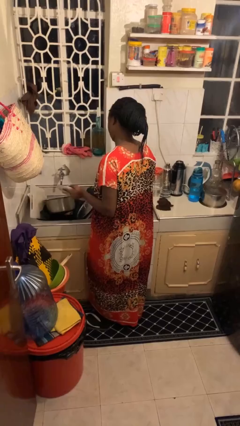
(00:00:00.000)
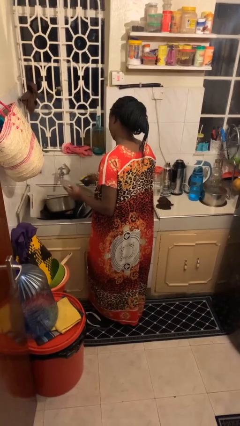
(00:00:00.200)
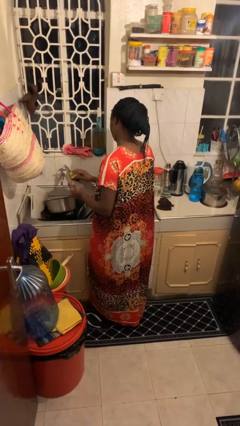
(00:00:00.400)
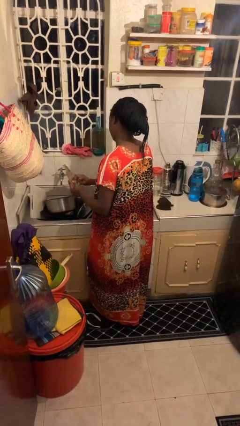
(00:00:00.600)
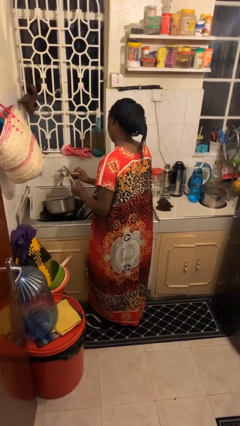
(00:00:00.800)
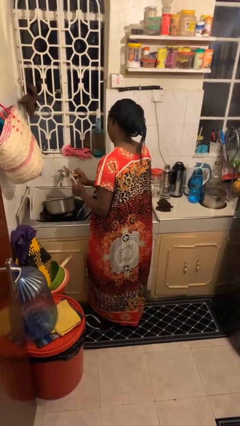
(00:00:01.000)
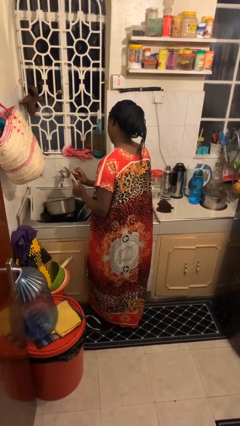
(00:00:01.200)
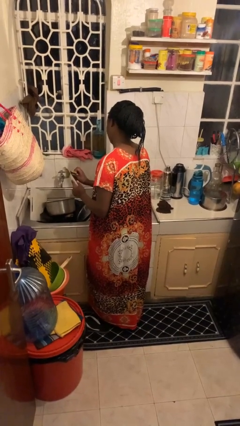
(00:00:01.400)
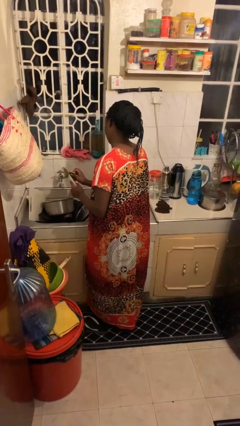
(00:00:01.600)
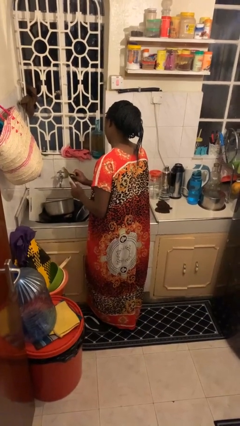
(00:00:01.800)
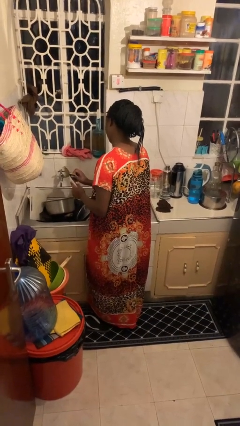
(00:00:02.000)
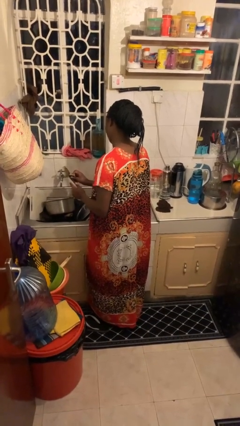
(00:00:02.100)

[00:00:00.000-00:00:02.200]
person washes dish

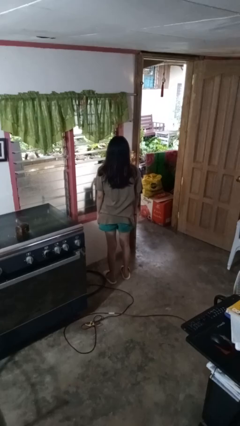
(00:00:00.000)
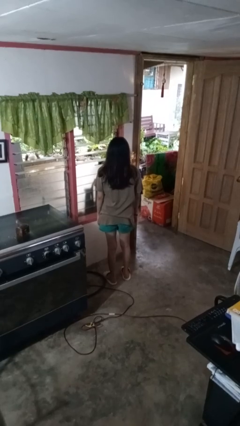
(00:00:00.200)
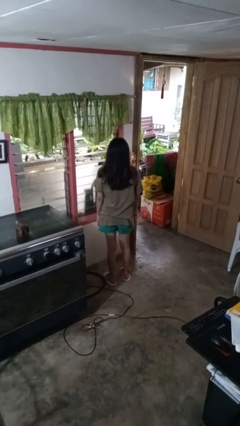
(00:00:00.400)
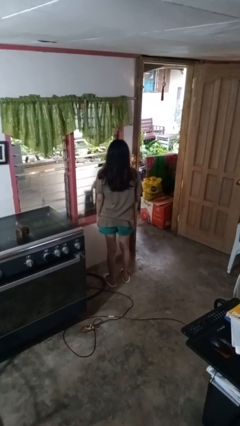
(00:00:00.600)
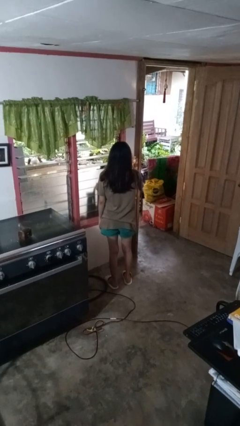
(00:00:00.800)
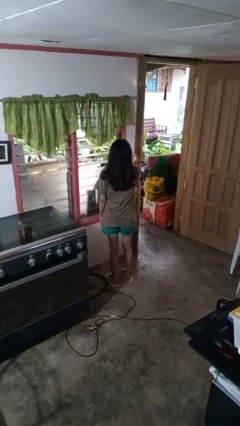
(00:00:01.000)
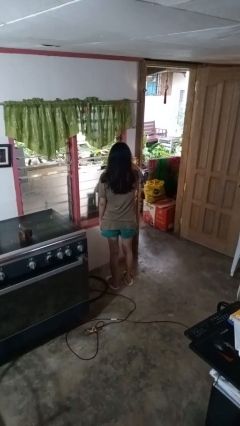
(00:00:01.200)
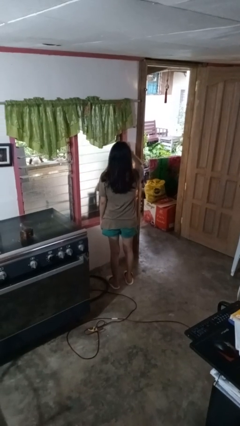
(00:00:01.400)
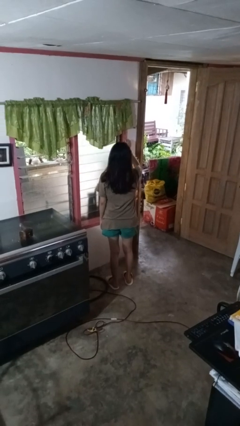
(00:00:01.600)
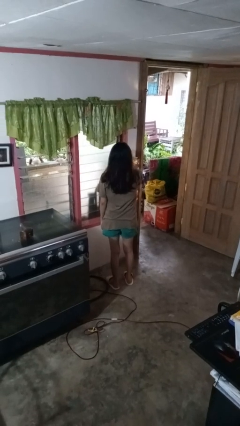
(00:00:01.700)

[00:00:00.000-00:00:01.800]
person closes home window

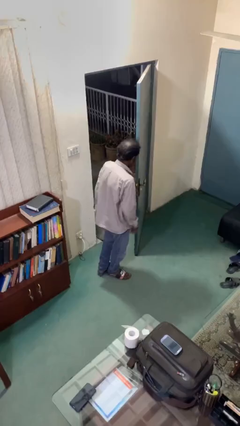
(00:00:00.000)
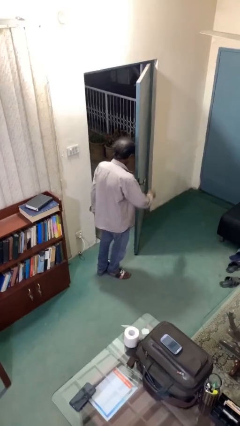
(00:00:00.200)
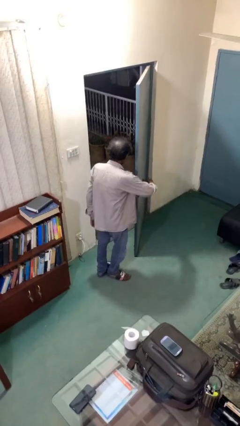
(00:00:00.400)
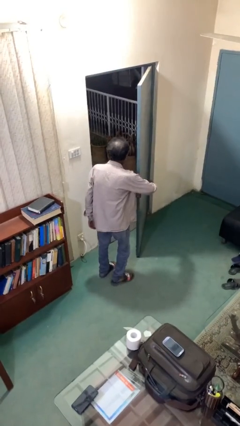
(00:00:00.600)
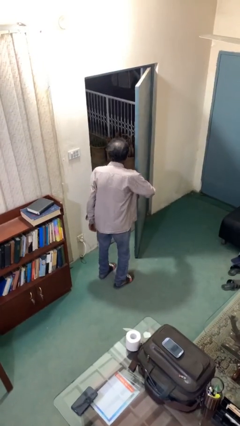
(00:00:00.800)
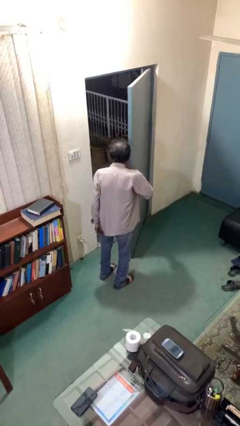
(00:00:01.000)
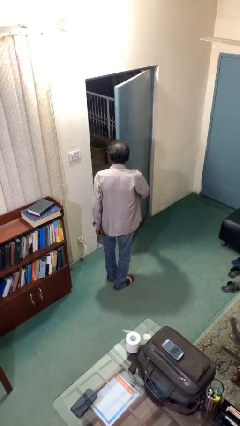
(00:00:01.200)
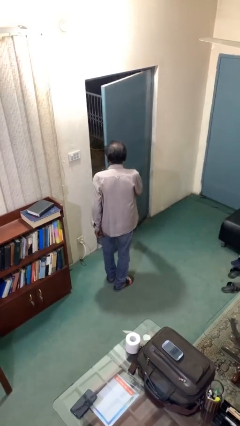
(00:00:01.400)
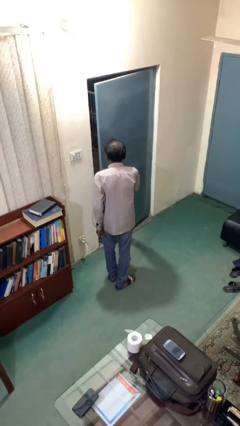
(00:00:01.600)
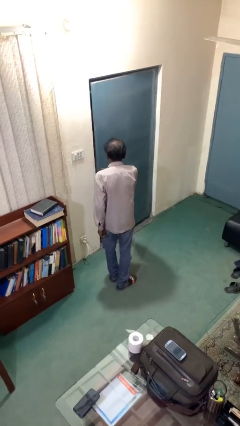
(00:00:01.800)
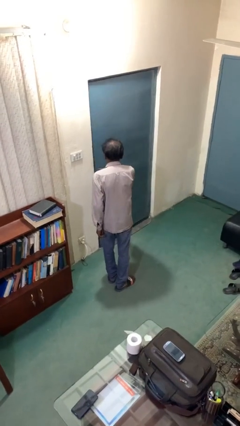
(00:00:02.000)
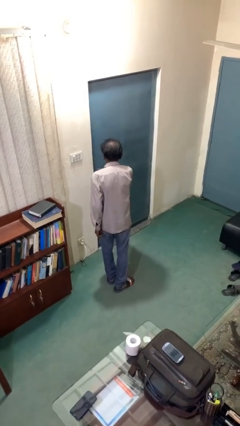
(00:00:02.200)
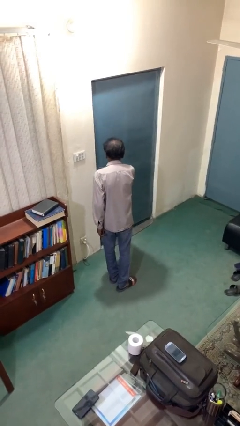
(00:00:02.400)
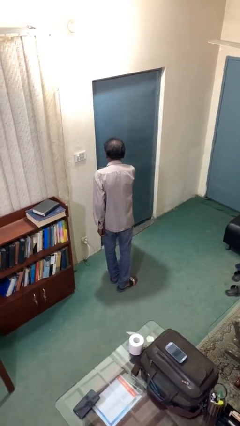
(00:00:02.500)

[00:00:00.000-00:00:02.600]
person closes facility door

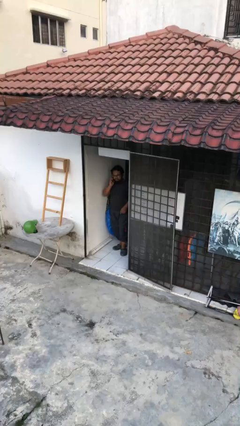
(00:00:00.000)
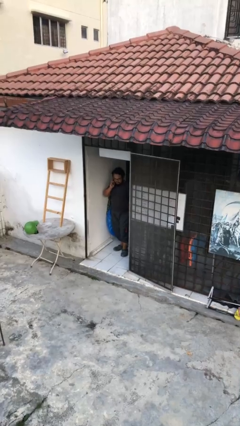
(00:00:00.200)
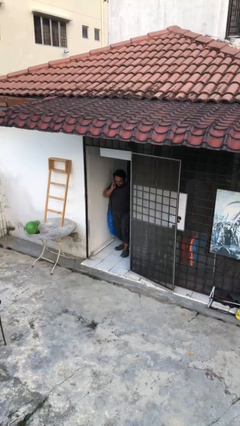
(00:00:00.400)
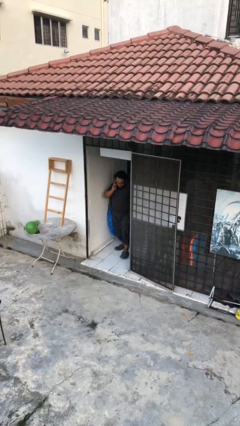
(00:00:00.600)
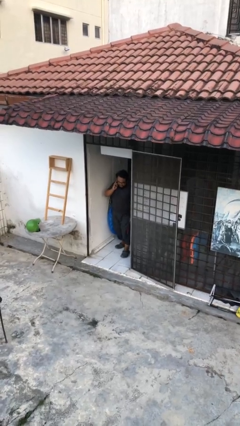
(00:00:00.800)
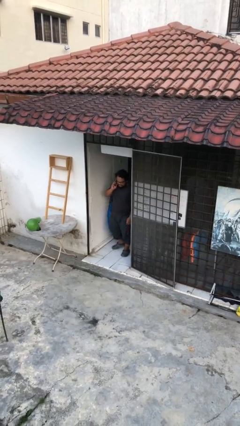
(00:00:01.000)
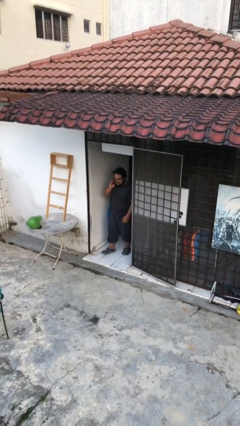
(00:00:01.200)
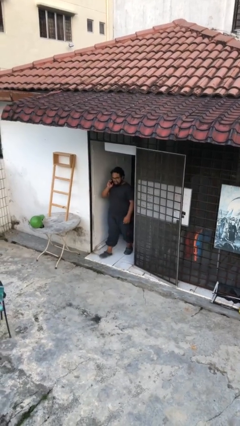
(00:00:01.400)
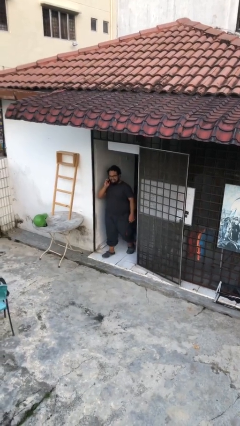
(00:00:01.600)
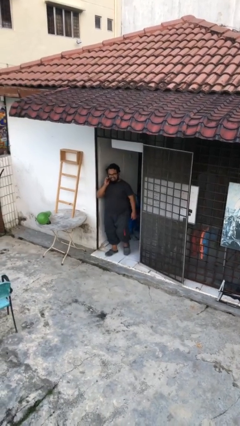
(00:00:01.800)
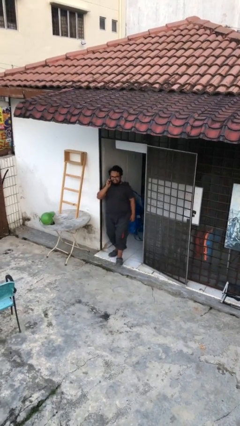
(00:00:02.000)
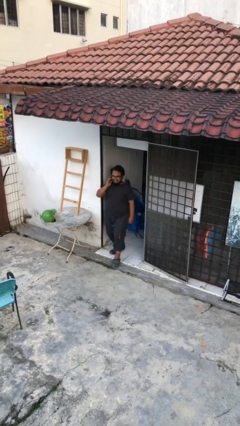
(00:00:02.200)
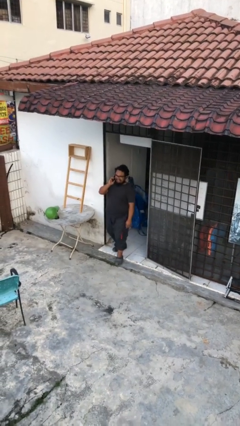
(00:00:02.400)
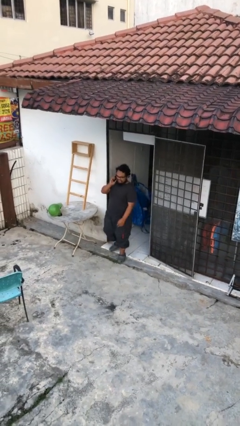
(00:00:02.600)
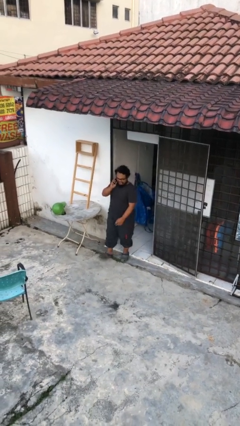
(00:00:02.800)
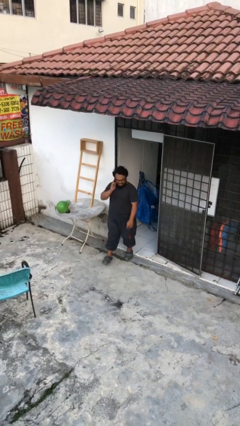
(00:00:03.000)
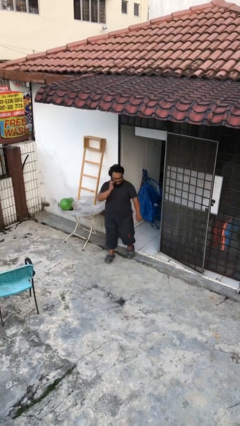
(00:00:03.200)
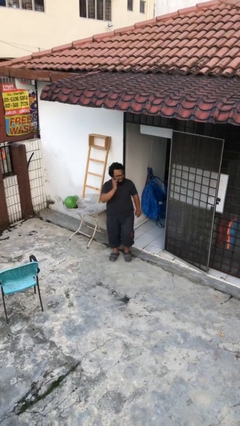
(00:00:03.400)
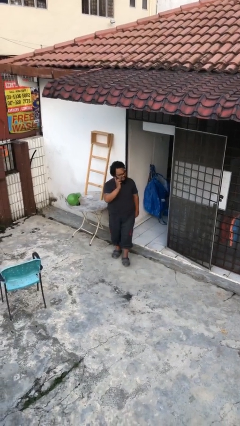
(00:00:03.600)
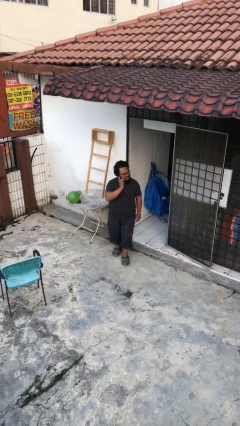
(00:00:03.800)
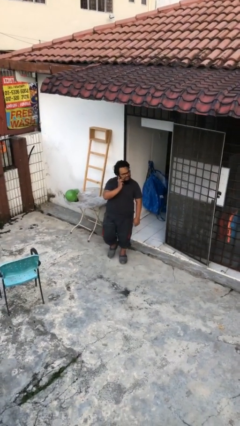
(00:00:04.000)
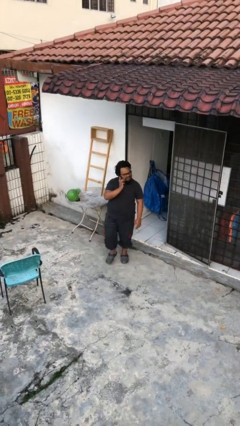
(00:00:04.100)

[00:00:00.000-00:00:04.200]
person enters scene through structure

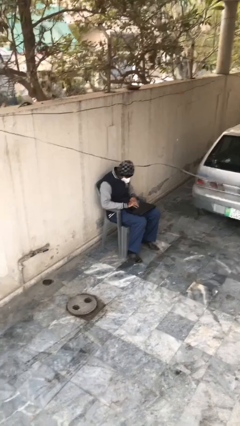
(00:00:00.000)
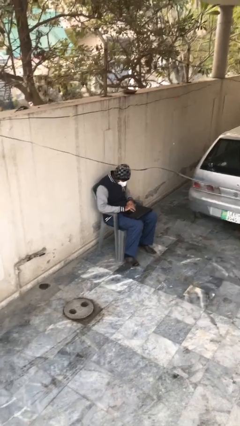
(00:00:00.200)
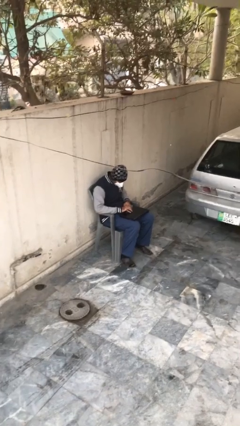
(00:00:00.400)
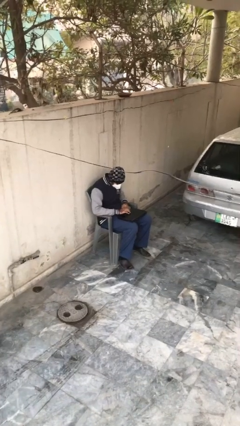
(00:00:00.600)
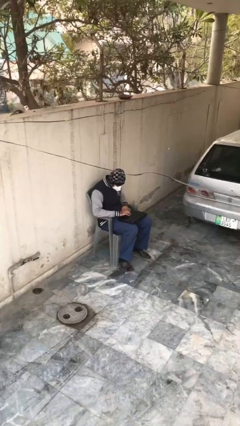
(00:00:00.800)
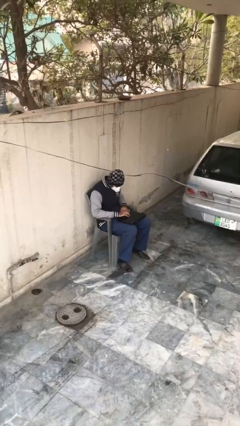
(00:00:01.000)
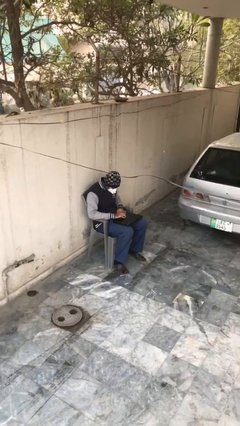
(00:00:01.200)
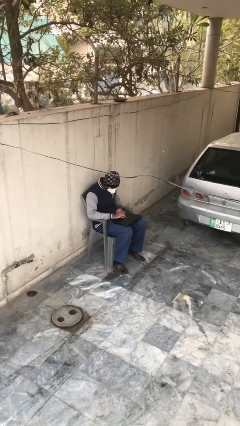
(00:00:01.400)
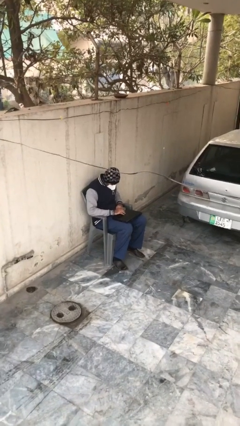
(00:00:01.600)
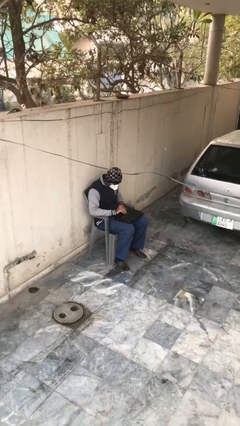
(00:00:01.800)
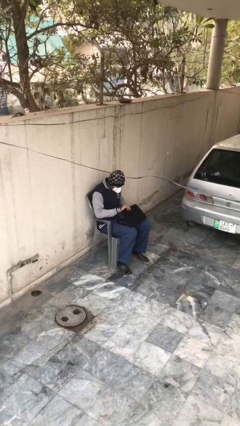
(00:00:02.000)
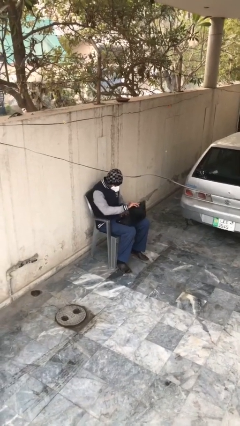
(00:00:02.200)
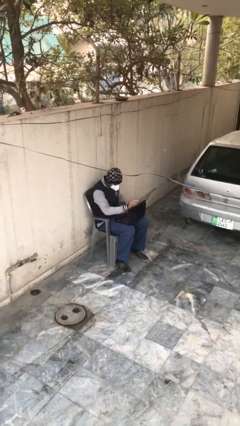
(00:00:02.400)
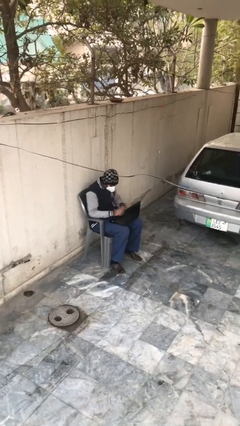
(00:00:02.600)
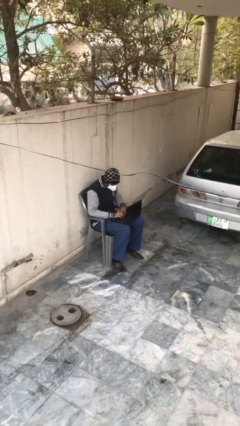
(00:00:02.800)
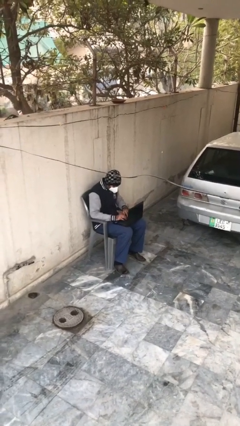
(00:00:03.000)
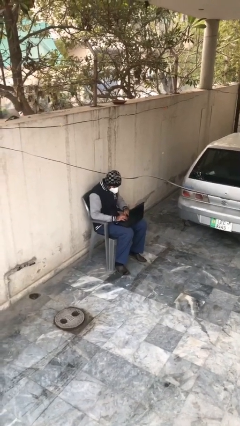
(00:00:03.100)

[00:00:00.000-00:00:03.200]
person interacts with laptop

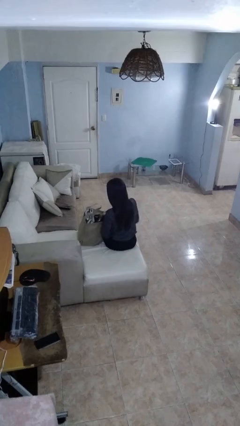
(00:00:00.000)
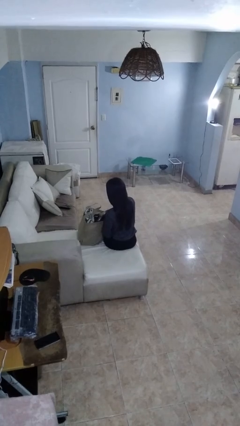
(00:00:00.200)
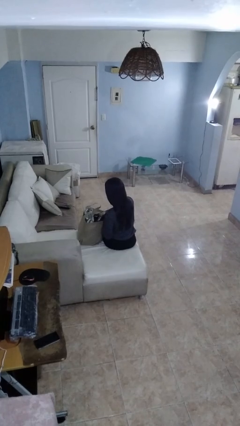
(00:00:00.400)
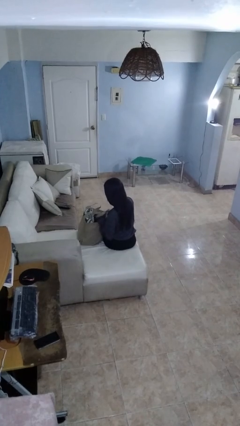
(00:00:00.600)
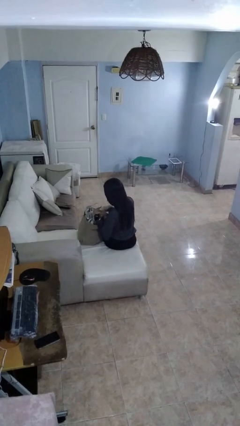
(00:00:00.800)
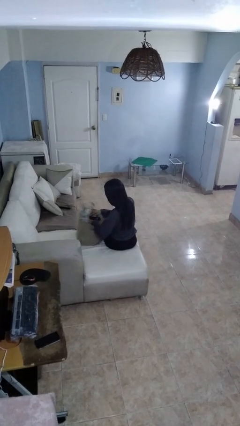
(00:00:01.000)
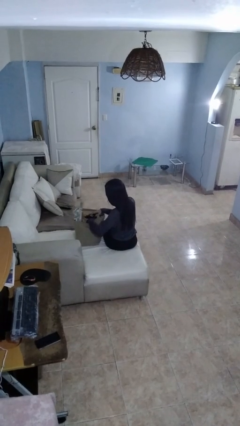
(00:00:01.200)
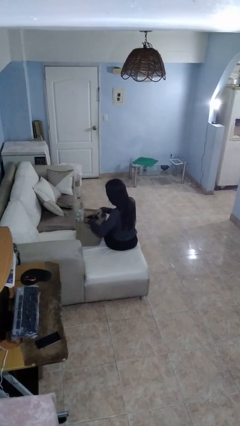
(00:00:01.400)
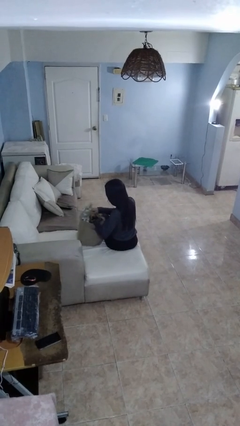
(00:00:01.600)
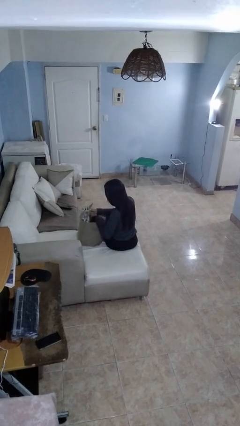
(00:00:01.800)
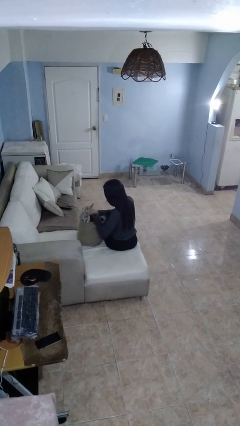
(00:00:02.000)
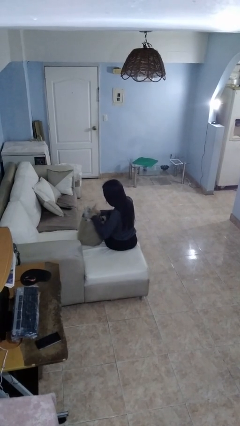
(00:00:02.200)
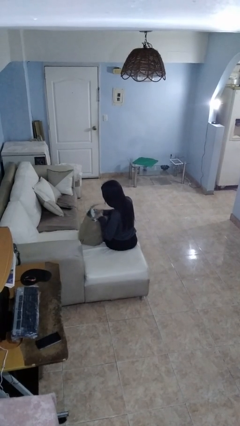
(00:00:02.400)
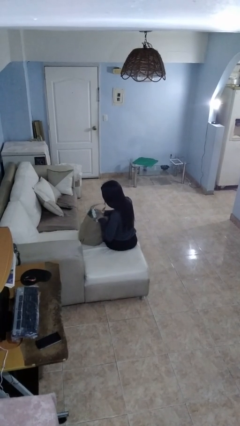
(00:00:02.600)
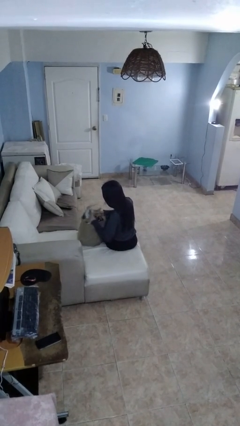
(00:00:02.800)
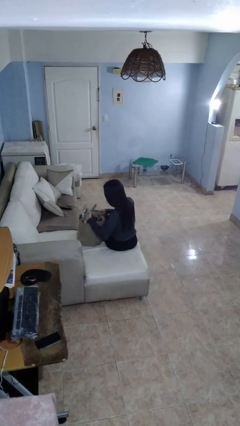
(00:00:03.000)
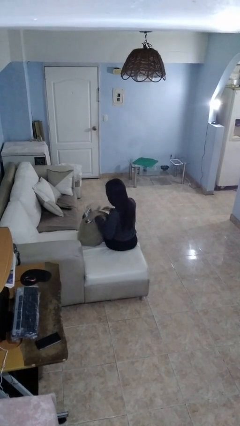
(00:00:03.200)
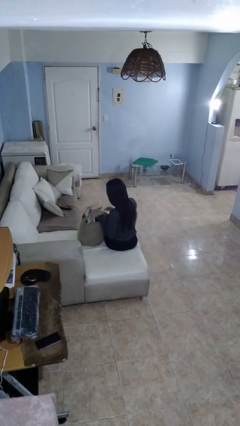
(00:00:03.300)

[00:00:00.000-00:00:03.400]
person searches in bag
